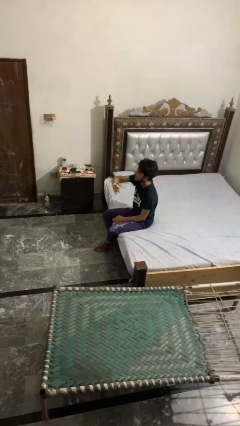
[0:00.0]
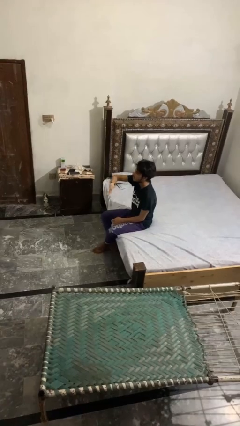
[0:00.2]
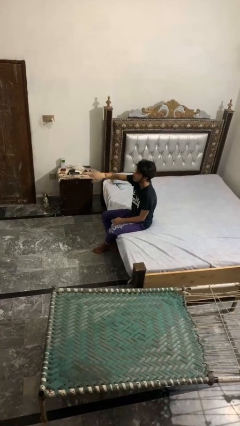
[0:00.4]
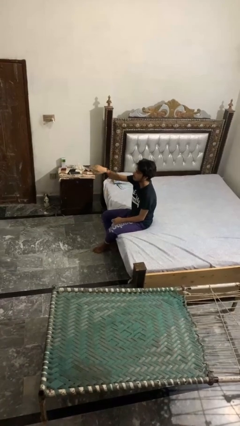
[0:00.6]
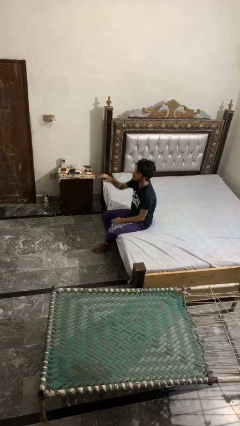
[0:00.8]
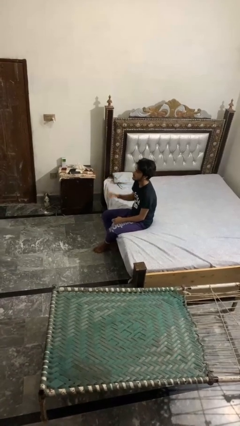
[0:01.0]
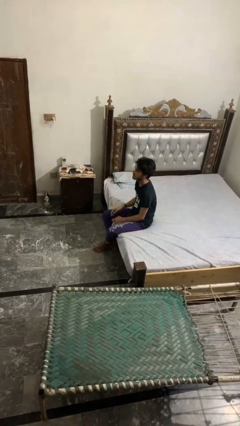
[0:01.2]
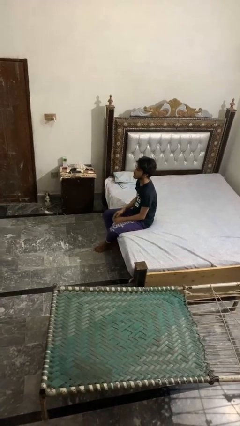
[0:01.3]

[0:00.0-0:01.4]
person gestures swipe right

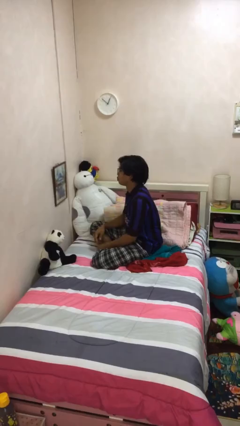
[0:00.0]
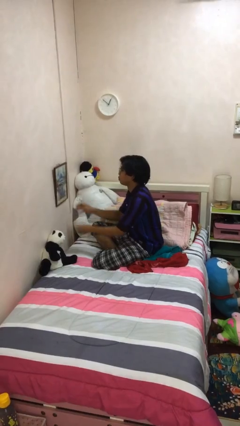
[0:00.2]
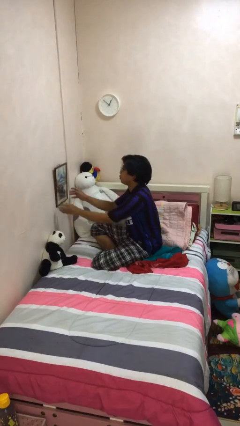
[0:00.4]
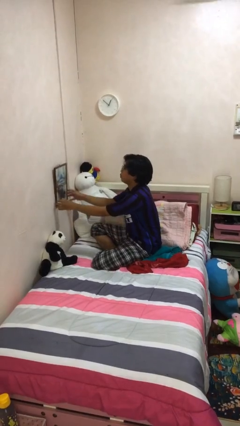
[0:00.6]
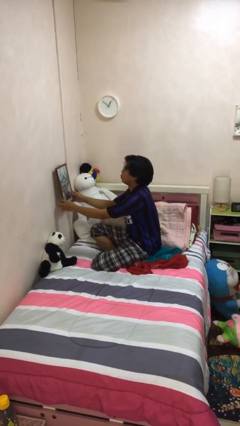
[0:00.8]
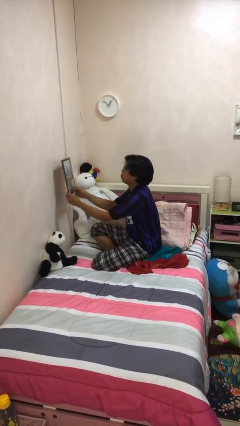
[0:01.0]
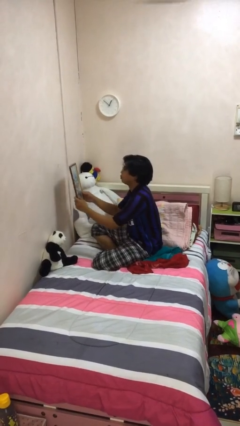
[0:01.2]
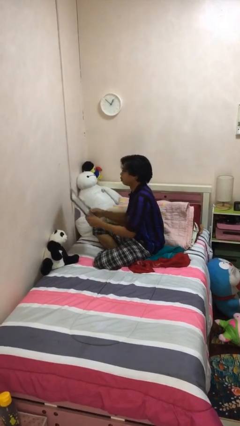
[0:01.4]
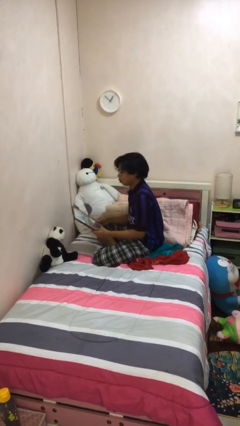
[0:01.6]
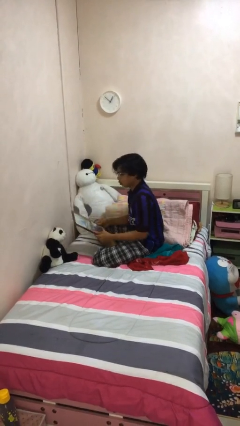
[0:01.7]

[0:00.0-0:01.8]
person takes down picture frame

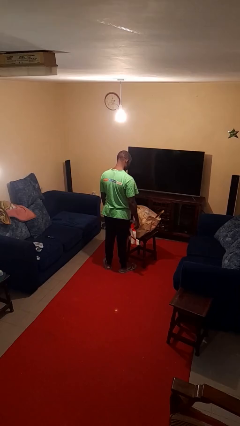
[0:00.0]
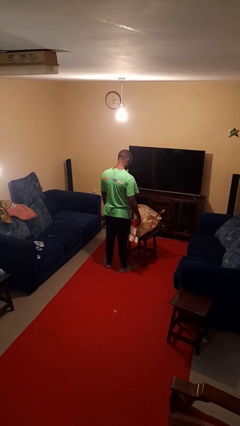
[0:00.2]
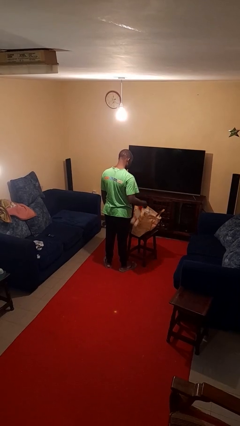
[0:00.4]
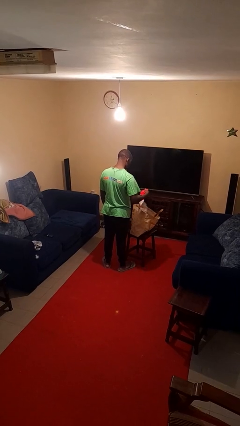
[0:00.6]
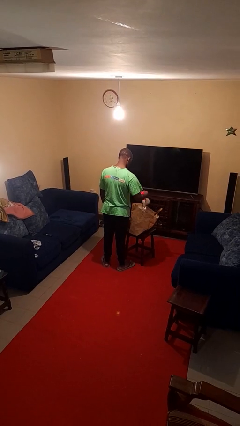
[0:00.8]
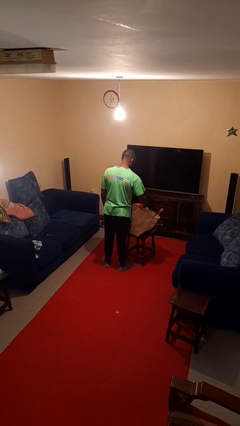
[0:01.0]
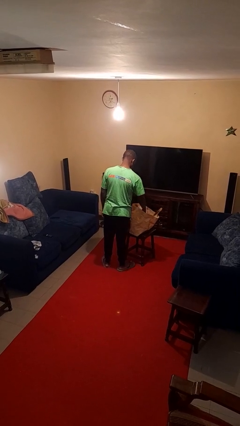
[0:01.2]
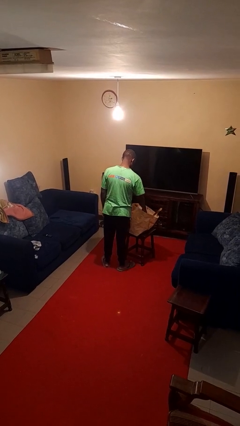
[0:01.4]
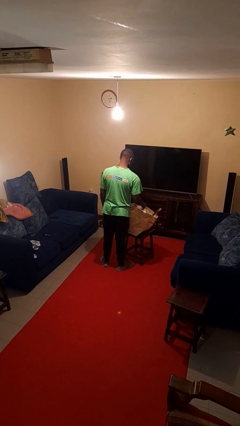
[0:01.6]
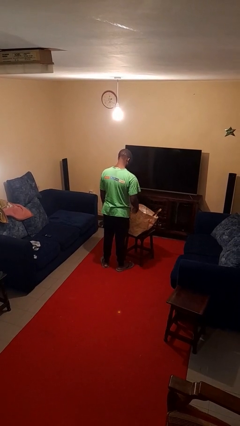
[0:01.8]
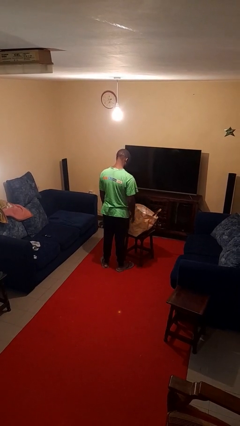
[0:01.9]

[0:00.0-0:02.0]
person puts object into bag

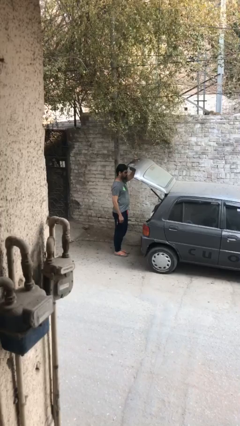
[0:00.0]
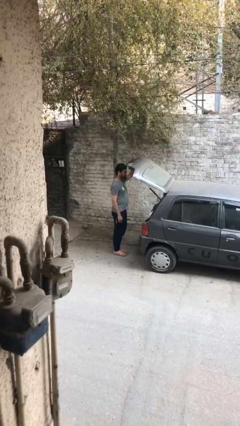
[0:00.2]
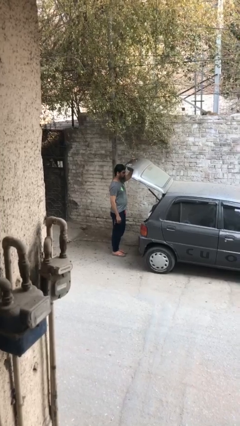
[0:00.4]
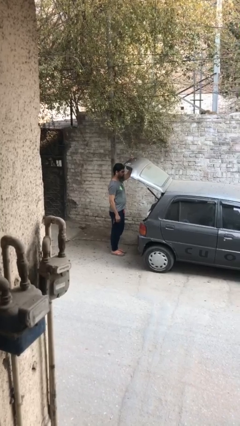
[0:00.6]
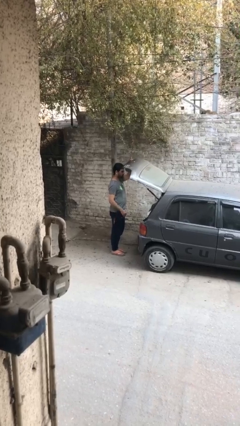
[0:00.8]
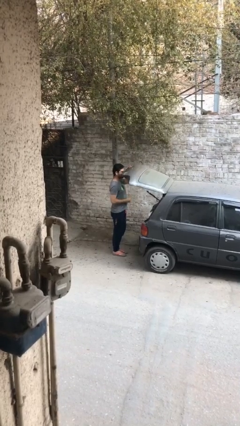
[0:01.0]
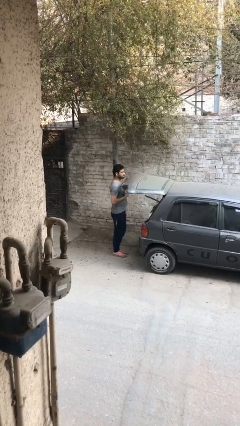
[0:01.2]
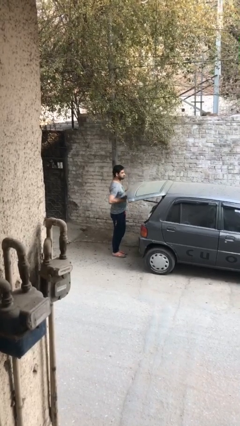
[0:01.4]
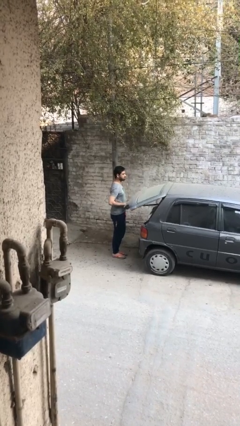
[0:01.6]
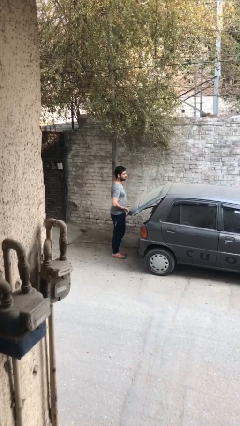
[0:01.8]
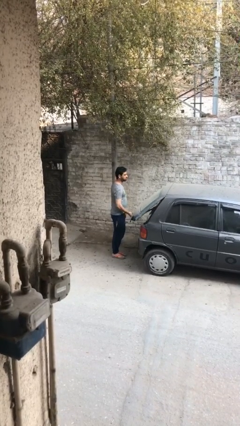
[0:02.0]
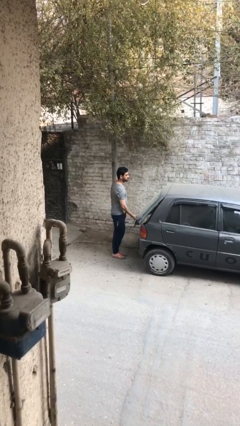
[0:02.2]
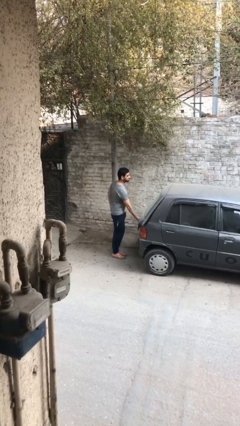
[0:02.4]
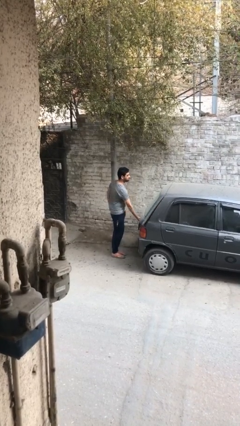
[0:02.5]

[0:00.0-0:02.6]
person closes car trunk

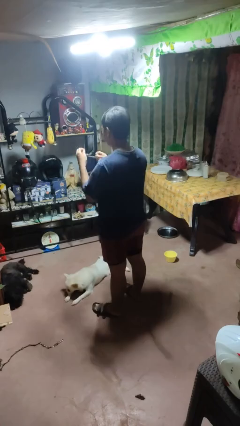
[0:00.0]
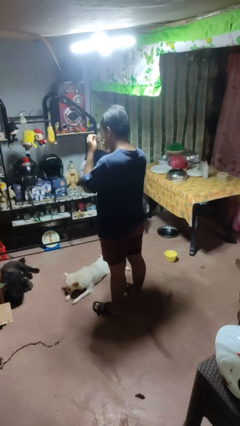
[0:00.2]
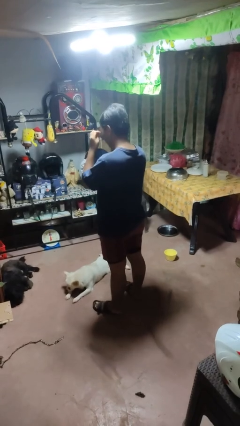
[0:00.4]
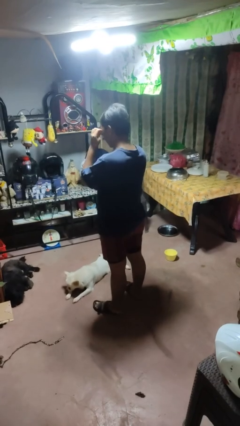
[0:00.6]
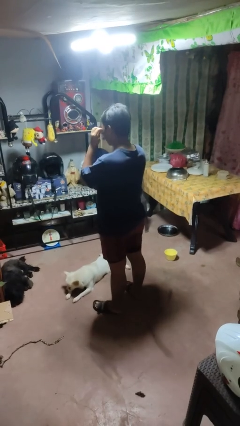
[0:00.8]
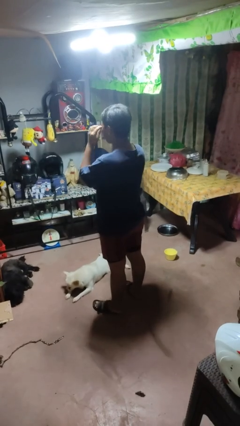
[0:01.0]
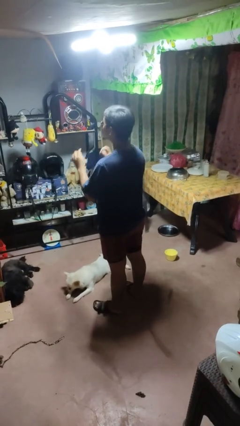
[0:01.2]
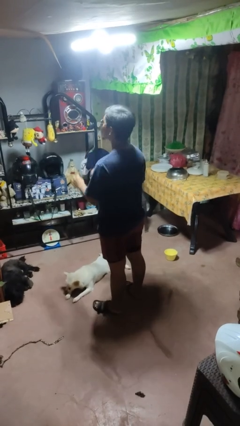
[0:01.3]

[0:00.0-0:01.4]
person puts on sunglasses

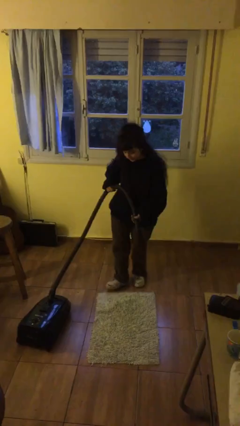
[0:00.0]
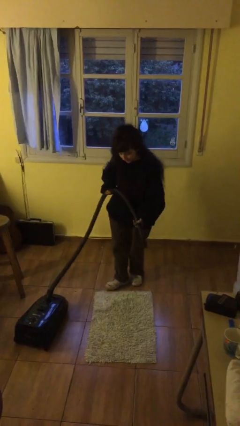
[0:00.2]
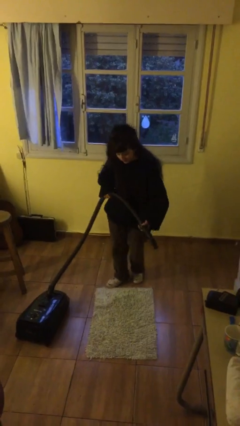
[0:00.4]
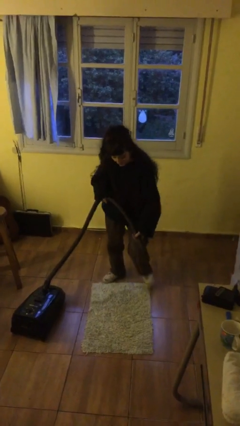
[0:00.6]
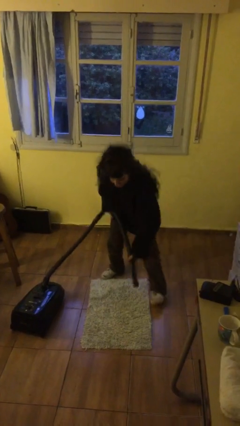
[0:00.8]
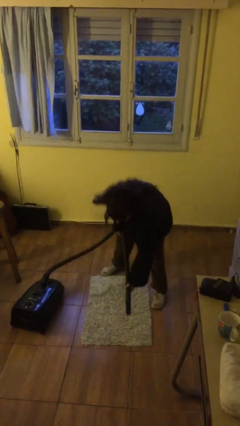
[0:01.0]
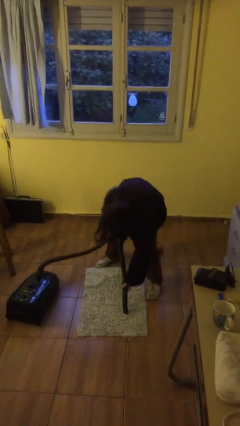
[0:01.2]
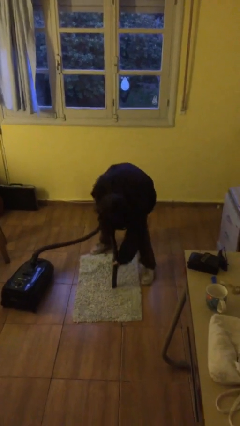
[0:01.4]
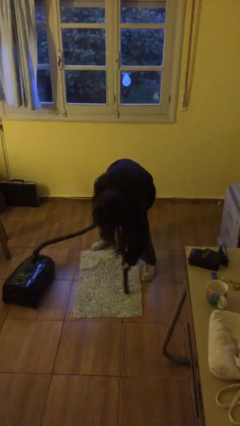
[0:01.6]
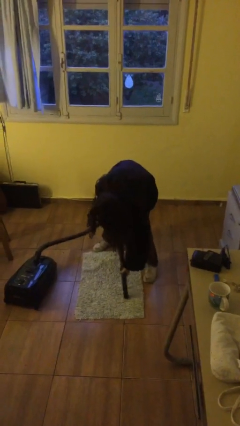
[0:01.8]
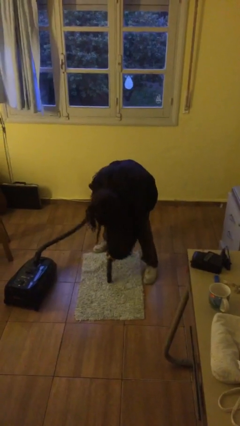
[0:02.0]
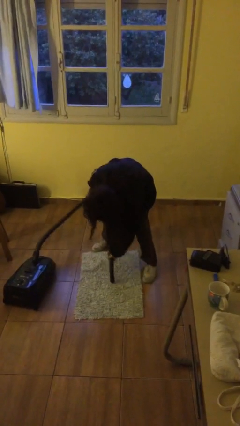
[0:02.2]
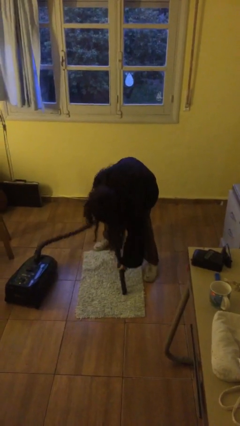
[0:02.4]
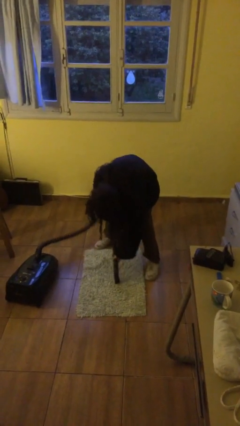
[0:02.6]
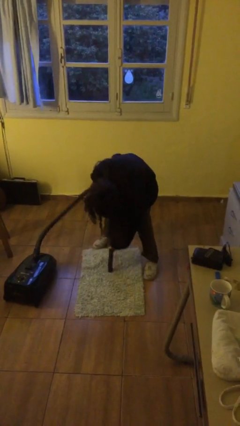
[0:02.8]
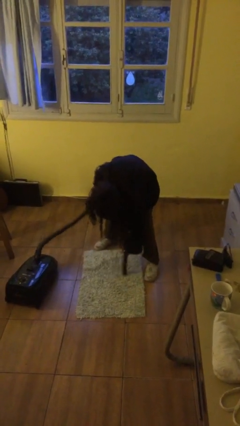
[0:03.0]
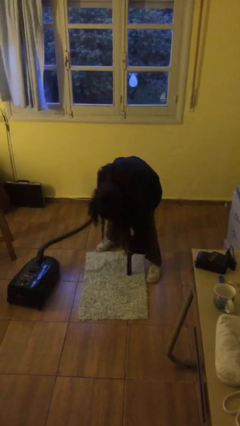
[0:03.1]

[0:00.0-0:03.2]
person vacuums carpet

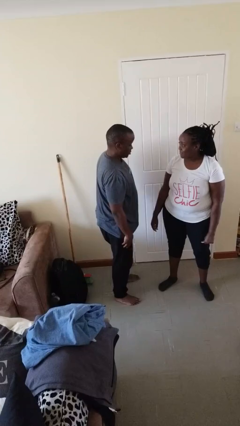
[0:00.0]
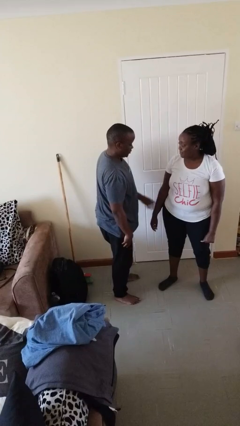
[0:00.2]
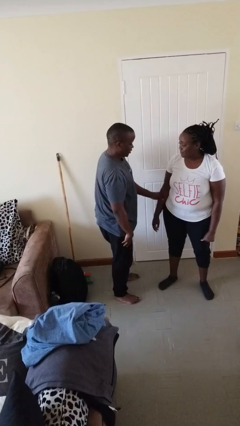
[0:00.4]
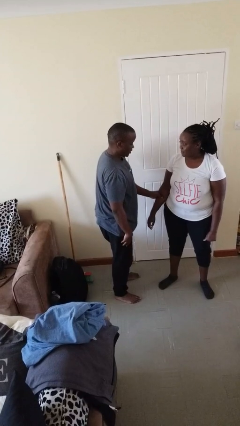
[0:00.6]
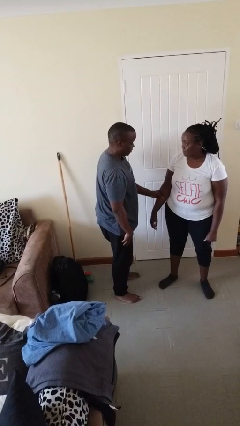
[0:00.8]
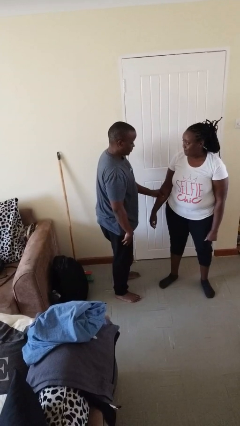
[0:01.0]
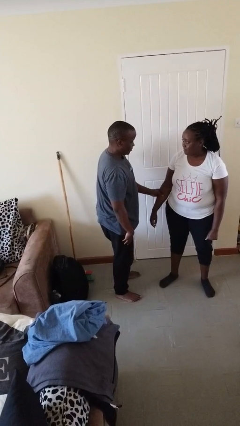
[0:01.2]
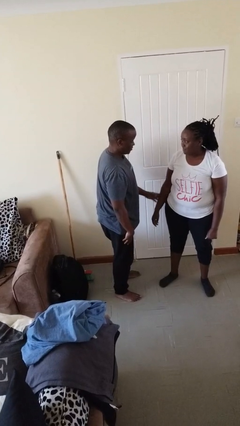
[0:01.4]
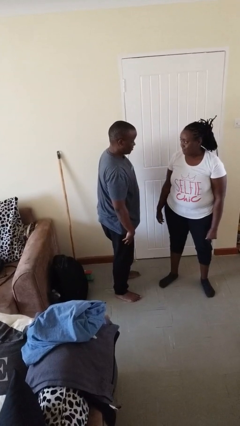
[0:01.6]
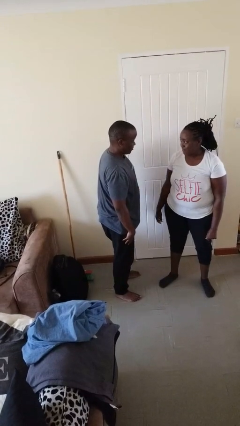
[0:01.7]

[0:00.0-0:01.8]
person grabs person by forearm

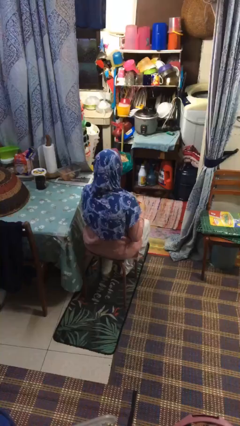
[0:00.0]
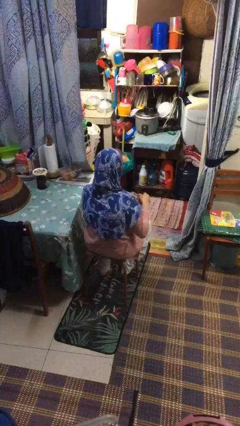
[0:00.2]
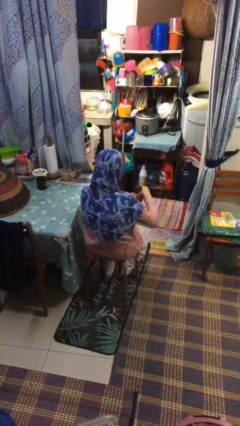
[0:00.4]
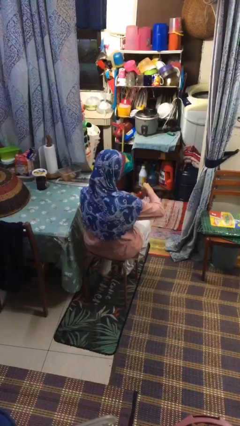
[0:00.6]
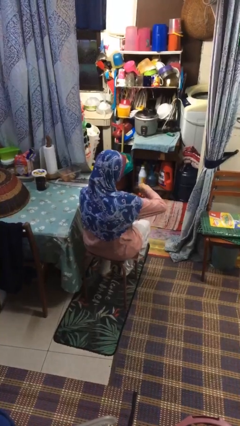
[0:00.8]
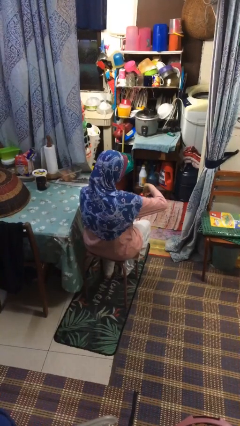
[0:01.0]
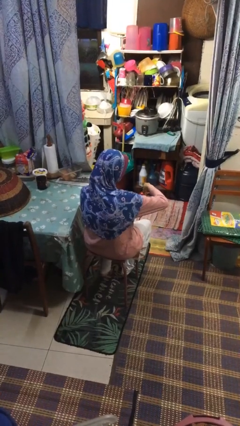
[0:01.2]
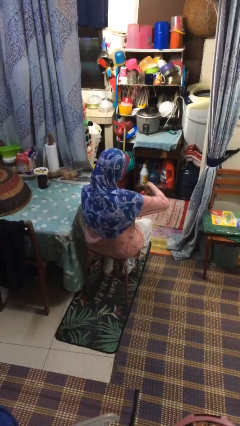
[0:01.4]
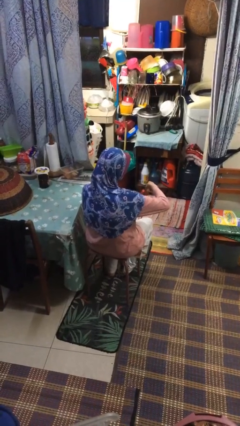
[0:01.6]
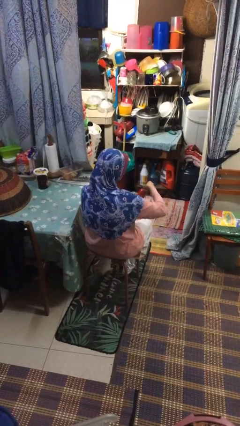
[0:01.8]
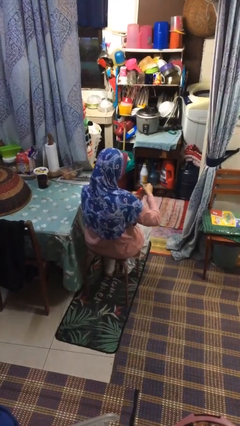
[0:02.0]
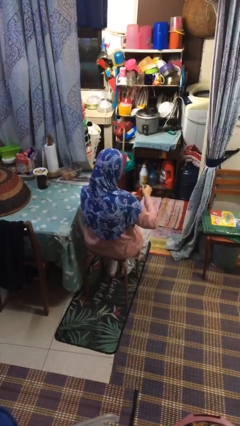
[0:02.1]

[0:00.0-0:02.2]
person opens beverage can

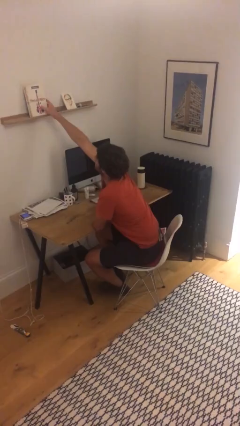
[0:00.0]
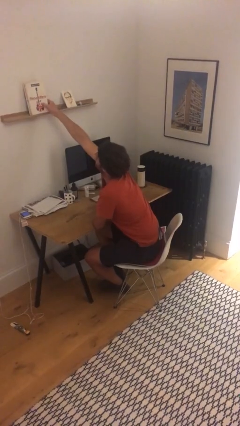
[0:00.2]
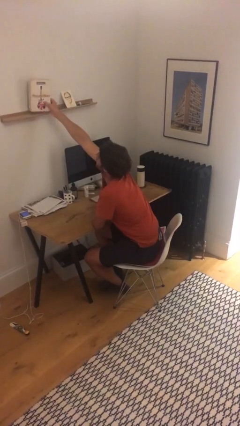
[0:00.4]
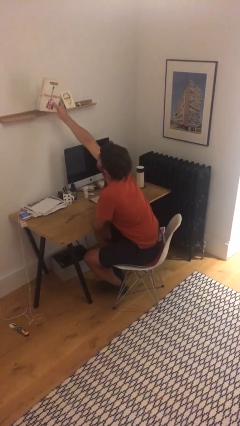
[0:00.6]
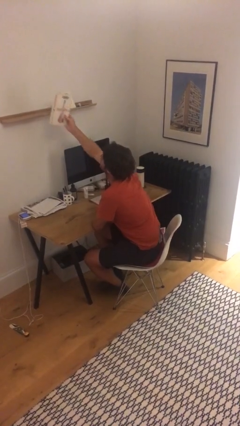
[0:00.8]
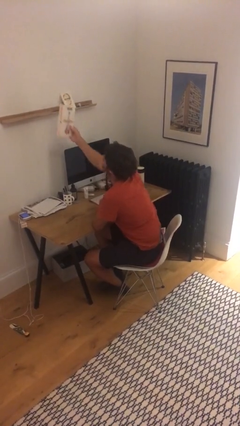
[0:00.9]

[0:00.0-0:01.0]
person picks up object from shelf
